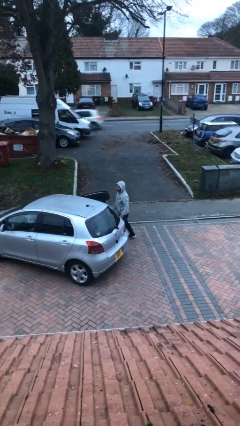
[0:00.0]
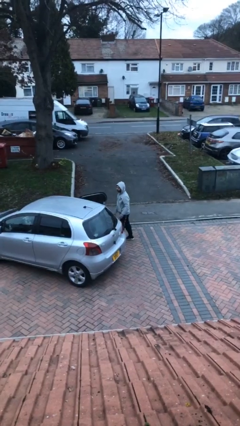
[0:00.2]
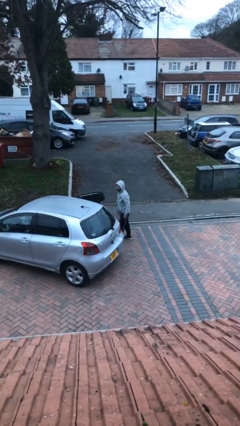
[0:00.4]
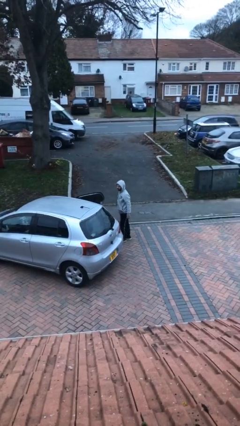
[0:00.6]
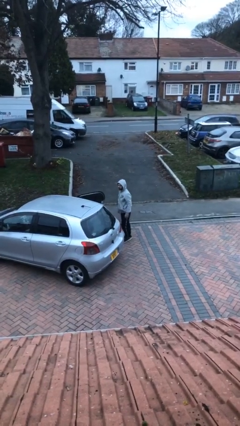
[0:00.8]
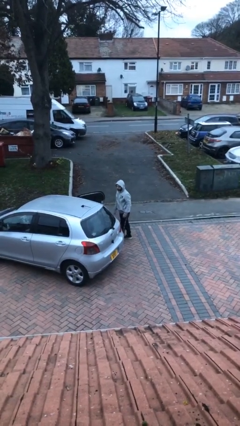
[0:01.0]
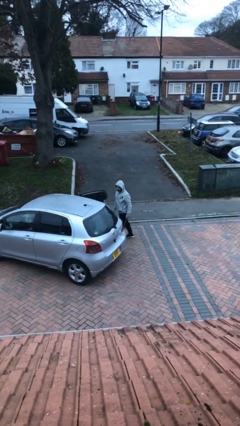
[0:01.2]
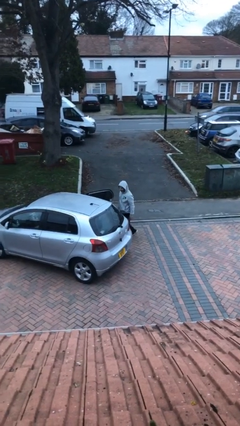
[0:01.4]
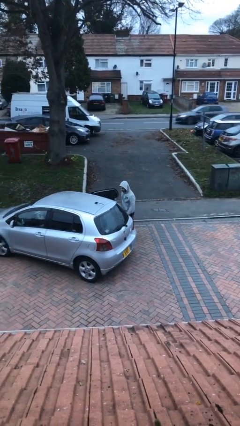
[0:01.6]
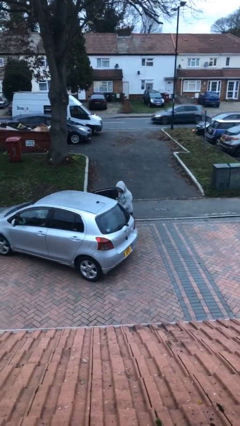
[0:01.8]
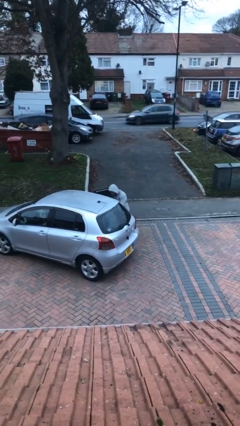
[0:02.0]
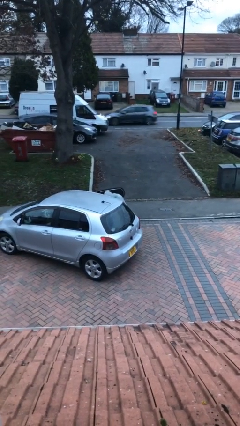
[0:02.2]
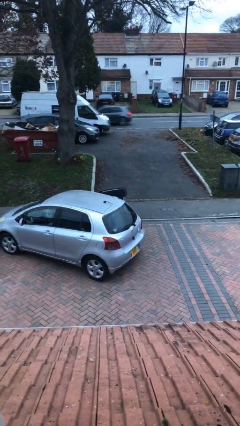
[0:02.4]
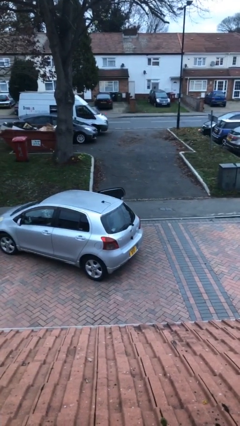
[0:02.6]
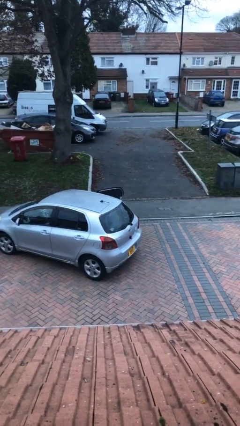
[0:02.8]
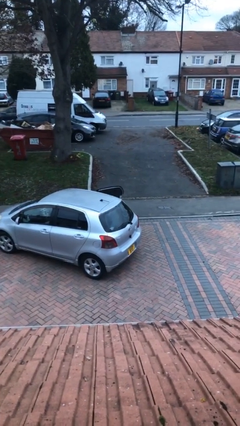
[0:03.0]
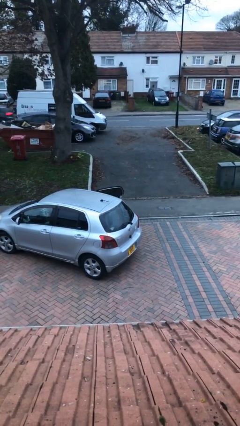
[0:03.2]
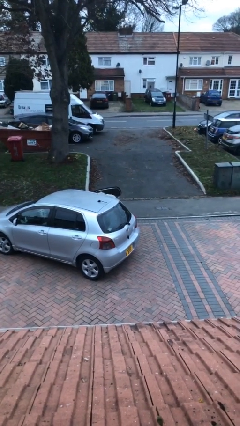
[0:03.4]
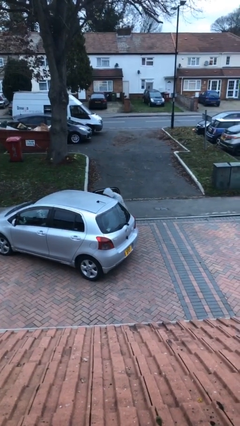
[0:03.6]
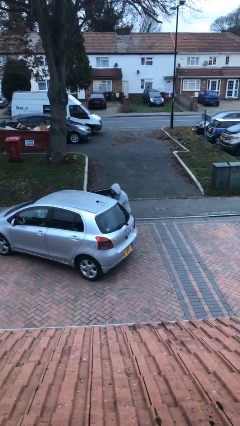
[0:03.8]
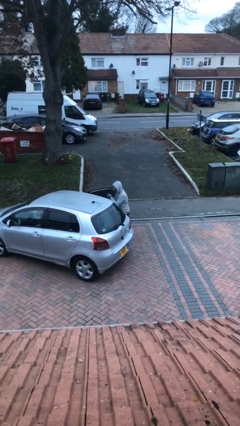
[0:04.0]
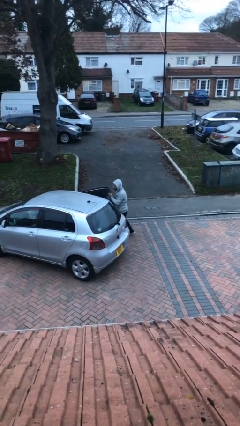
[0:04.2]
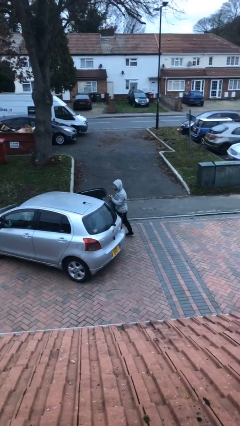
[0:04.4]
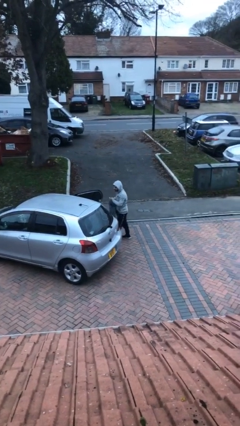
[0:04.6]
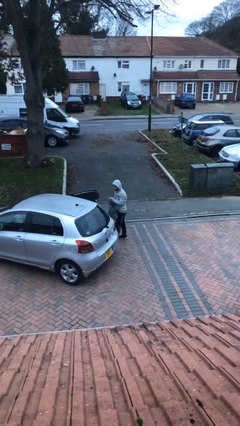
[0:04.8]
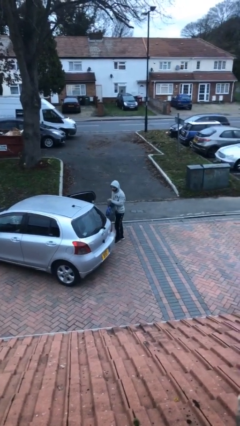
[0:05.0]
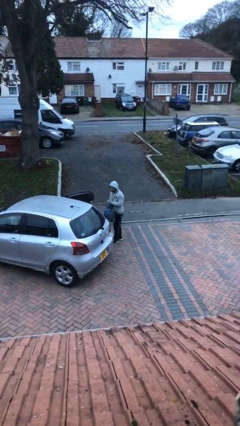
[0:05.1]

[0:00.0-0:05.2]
person unloads car

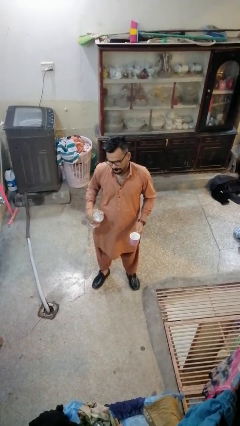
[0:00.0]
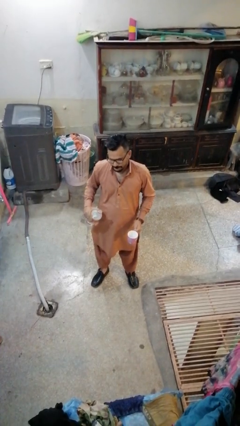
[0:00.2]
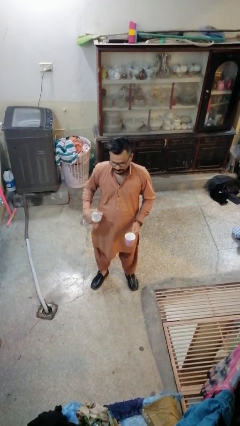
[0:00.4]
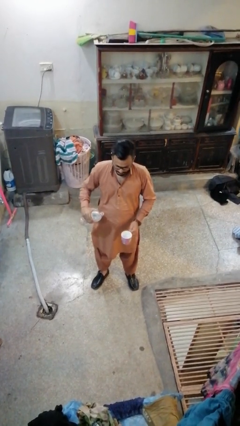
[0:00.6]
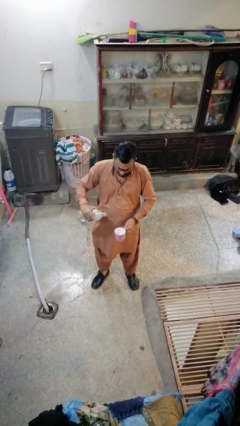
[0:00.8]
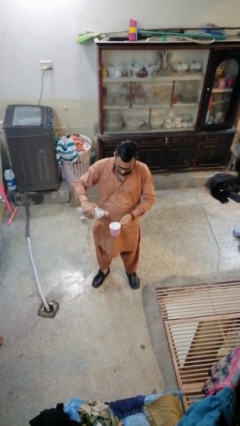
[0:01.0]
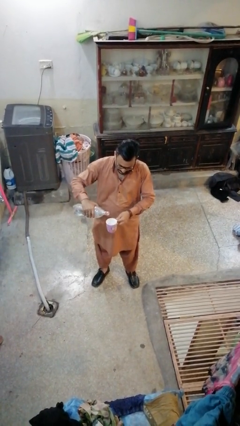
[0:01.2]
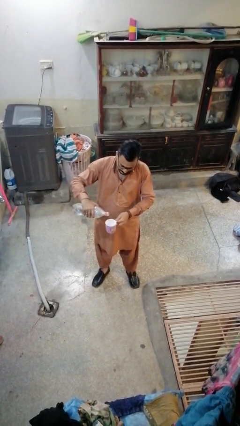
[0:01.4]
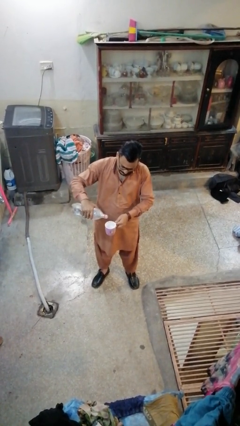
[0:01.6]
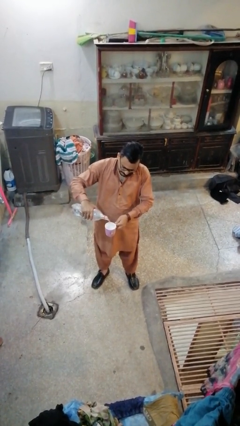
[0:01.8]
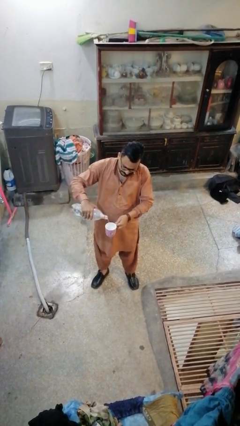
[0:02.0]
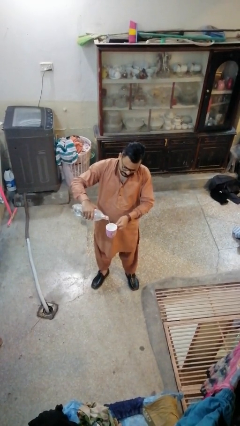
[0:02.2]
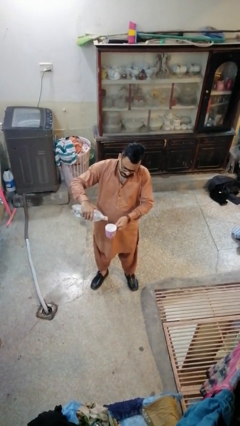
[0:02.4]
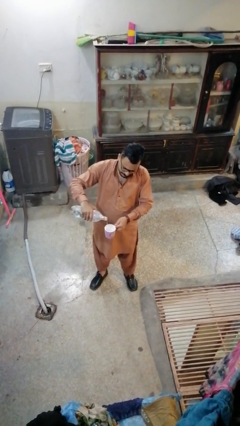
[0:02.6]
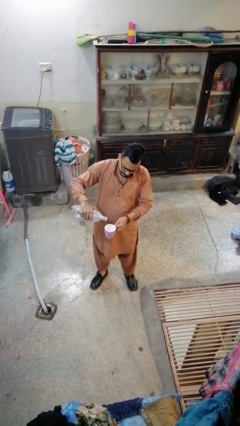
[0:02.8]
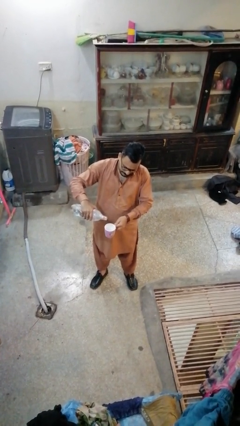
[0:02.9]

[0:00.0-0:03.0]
person pours liquid into cup

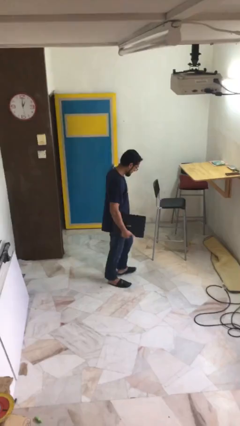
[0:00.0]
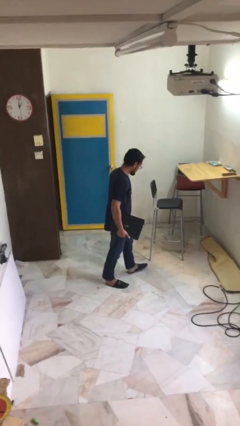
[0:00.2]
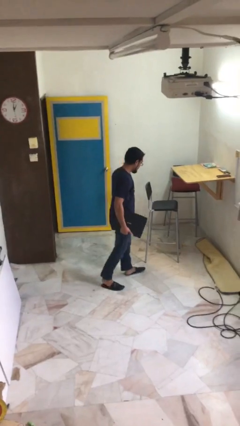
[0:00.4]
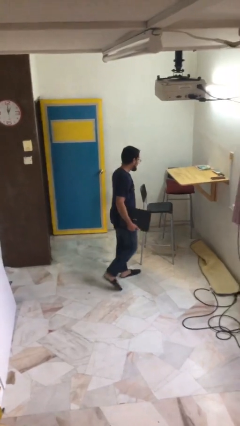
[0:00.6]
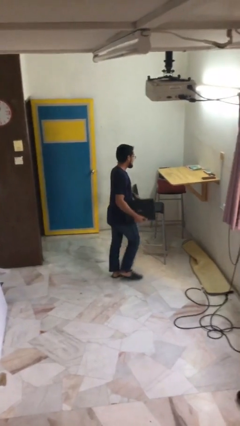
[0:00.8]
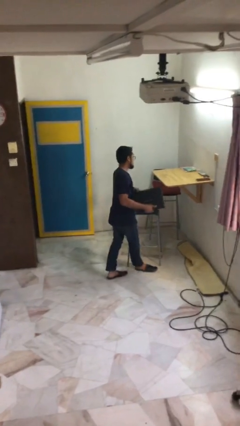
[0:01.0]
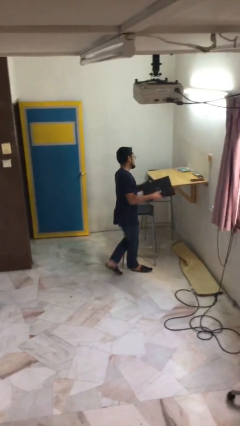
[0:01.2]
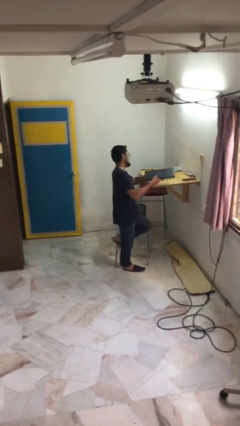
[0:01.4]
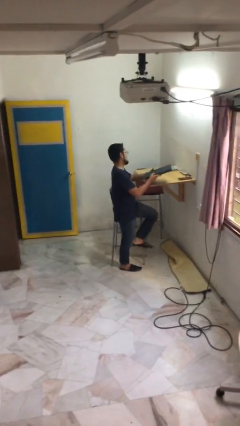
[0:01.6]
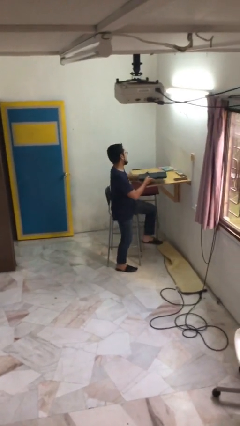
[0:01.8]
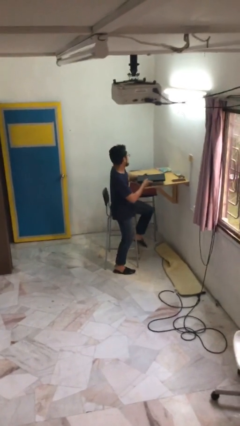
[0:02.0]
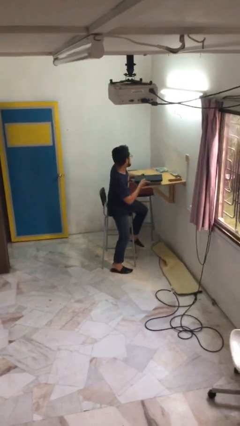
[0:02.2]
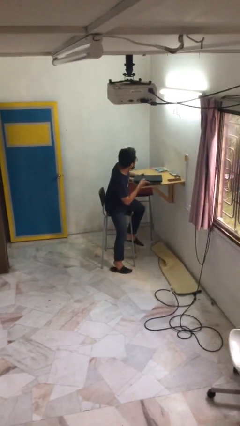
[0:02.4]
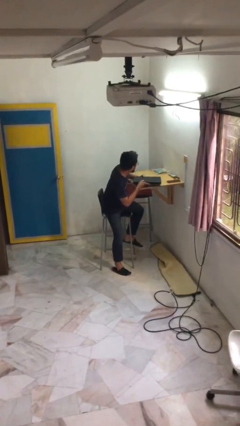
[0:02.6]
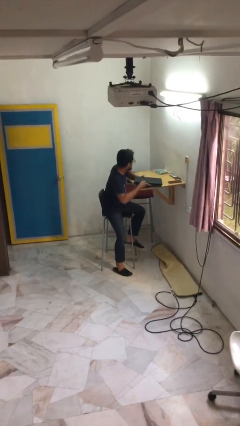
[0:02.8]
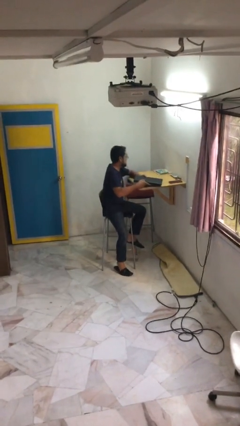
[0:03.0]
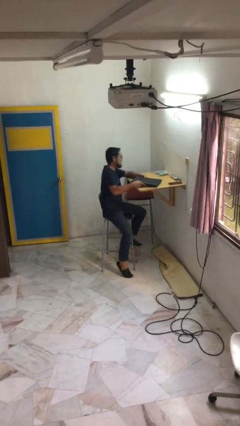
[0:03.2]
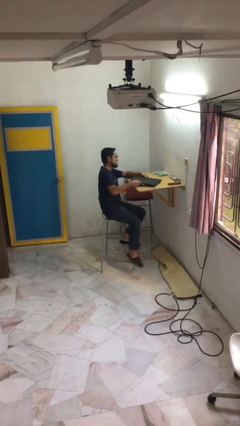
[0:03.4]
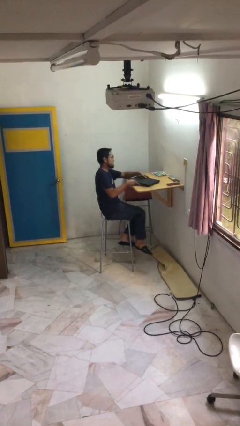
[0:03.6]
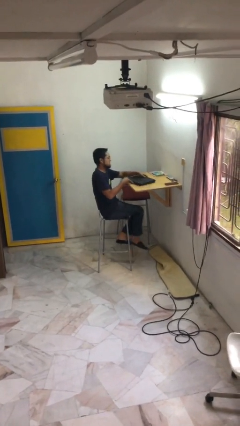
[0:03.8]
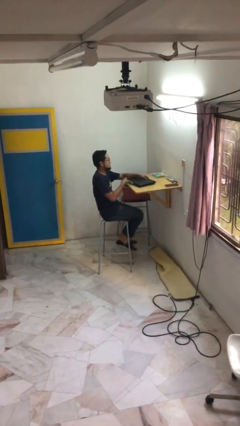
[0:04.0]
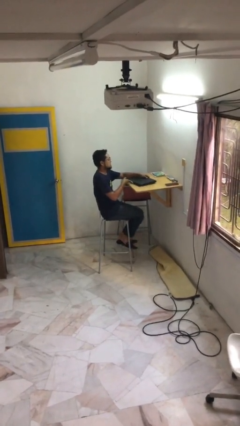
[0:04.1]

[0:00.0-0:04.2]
person sits down

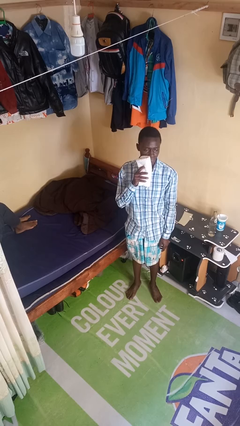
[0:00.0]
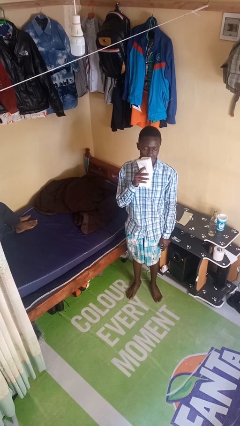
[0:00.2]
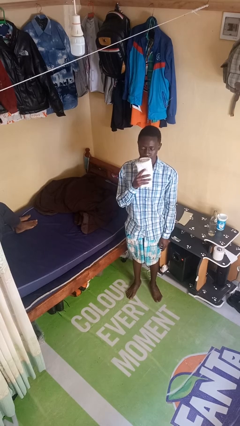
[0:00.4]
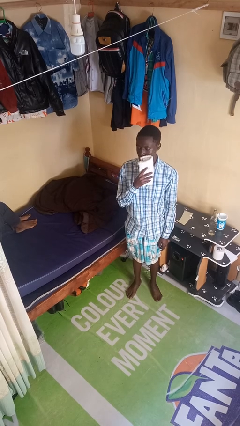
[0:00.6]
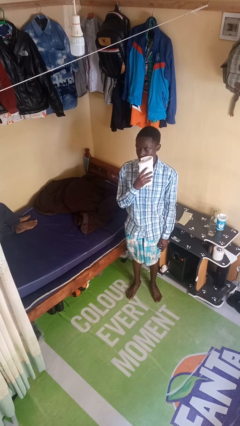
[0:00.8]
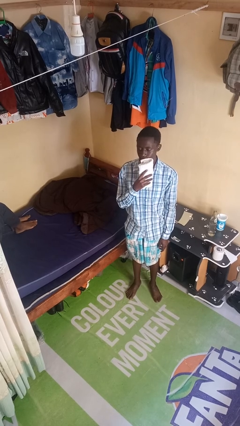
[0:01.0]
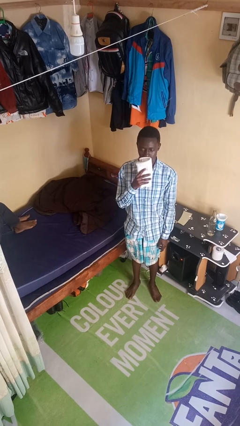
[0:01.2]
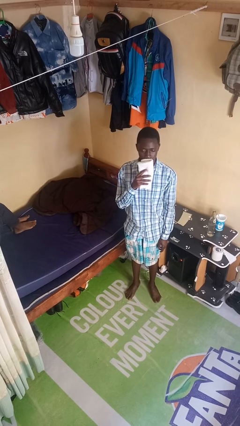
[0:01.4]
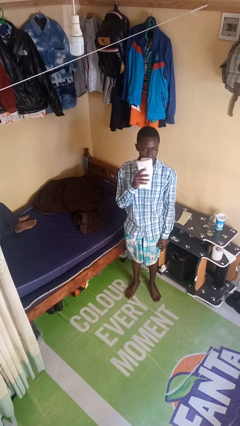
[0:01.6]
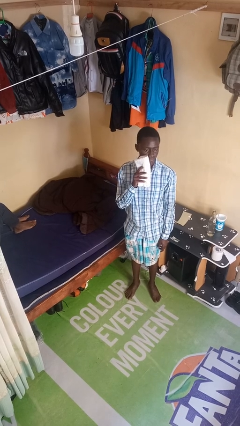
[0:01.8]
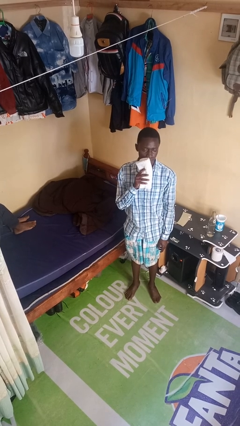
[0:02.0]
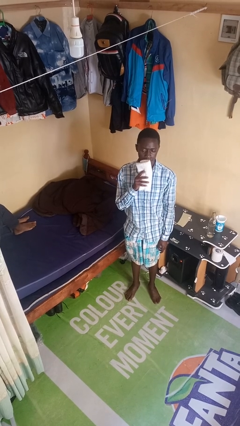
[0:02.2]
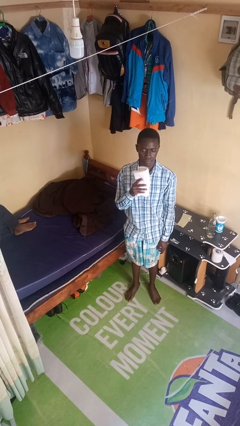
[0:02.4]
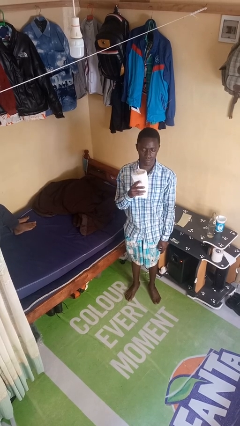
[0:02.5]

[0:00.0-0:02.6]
person wipes mouth with napkin

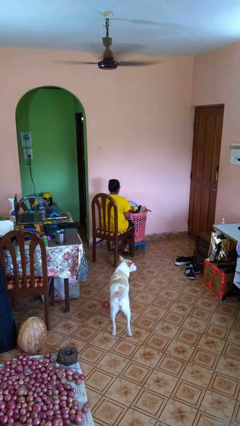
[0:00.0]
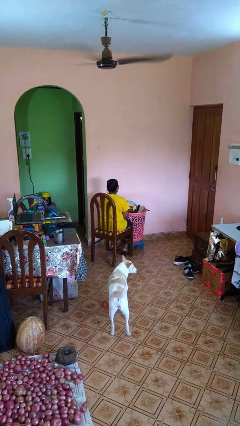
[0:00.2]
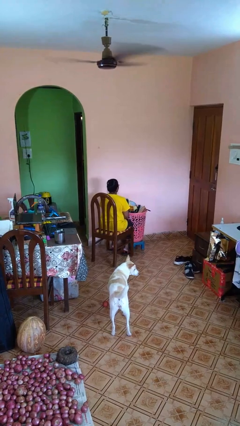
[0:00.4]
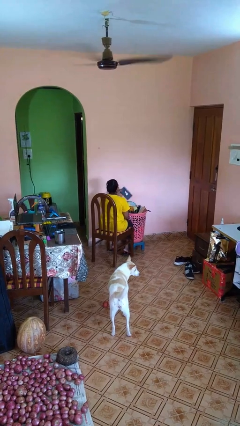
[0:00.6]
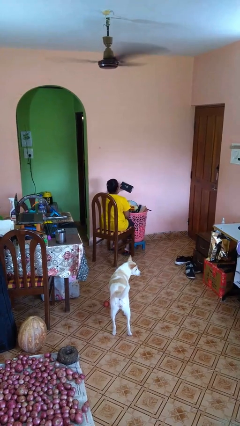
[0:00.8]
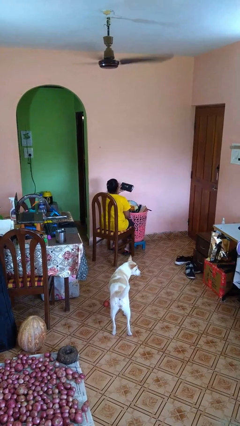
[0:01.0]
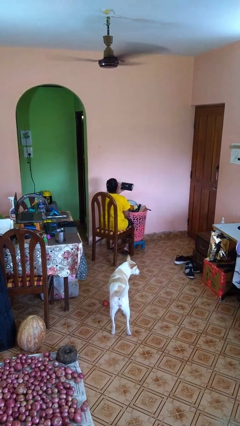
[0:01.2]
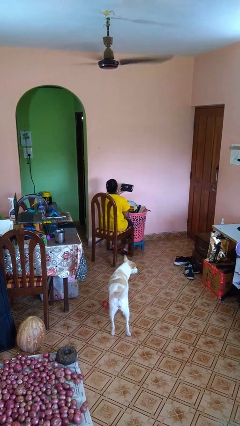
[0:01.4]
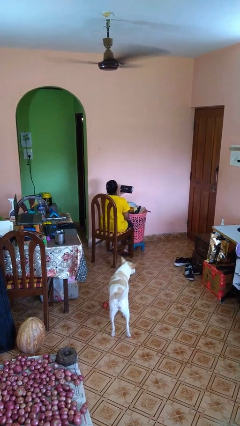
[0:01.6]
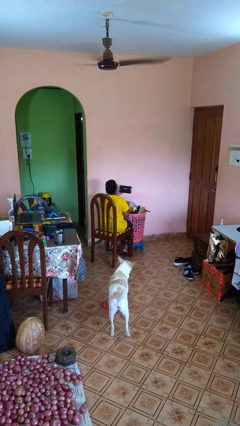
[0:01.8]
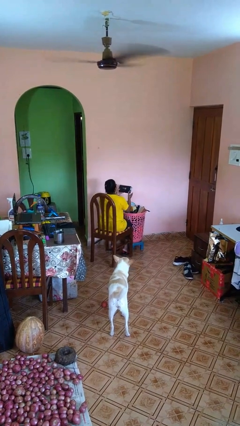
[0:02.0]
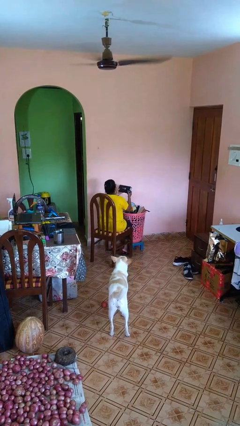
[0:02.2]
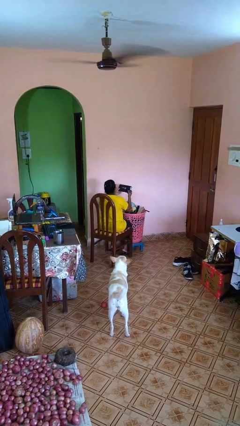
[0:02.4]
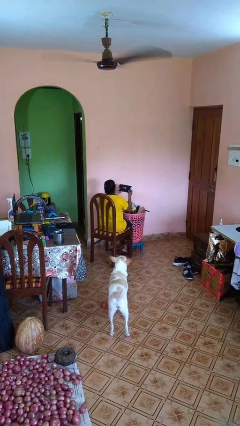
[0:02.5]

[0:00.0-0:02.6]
person takes object from basket
